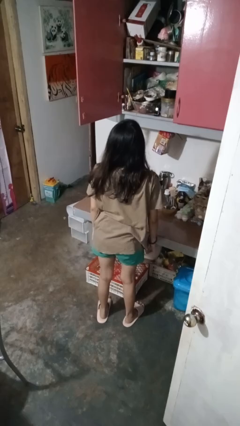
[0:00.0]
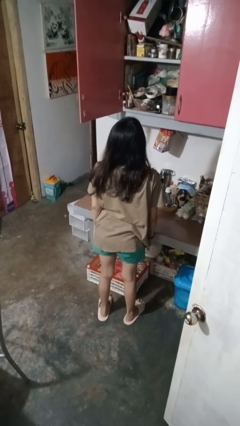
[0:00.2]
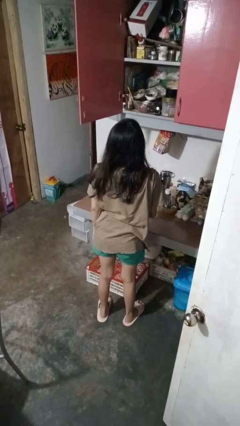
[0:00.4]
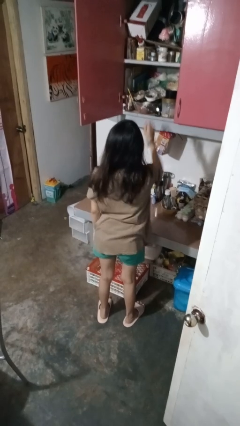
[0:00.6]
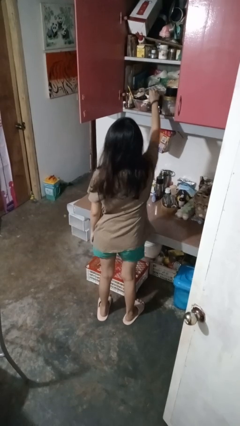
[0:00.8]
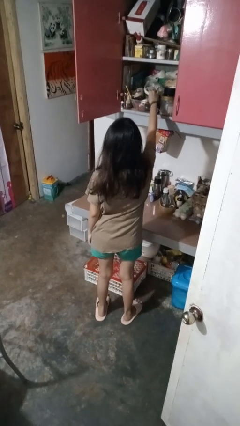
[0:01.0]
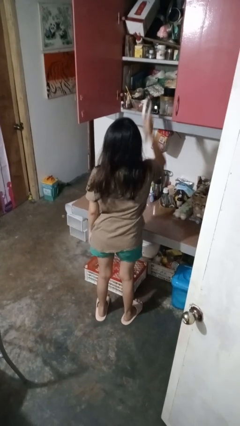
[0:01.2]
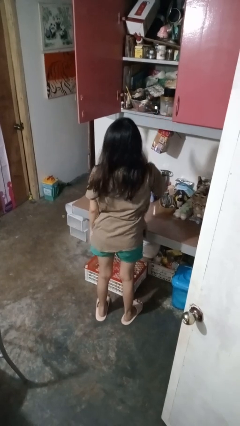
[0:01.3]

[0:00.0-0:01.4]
person takes object from cabinet

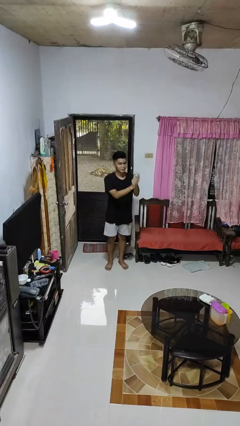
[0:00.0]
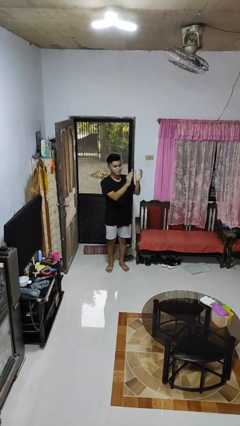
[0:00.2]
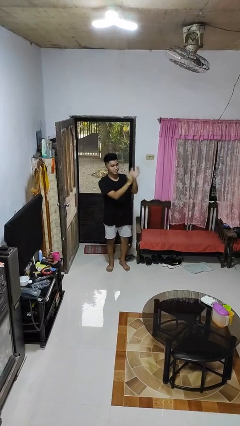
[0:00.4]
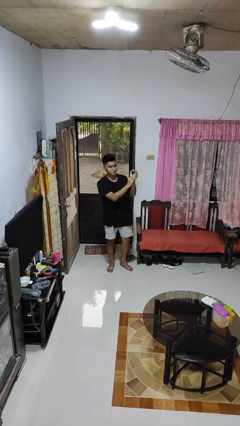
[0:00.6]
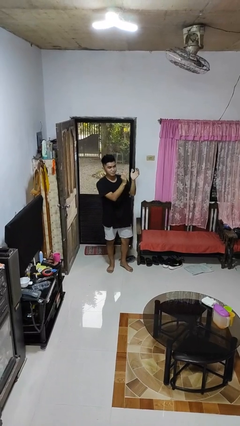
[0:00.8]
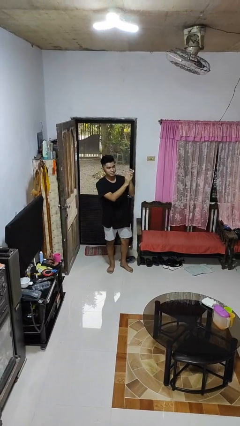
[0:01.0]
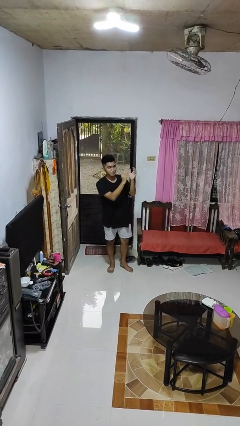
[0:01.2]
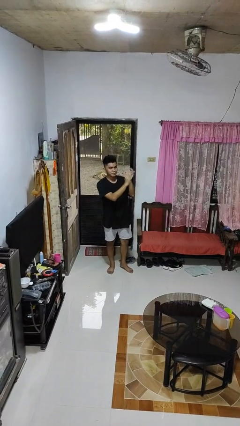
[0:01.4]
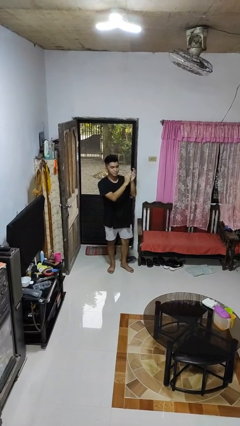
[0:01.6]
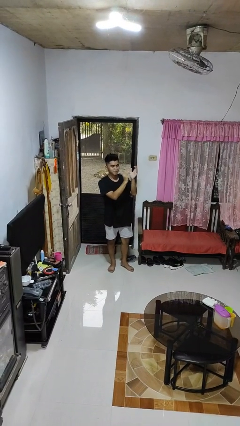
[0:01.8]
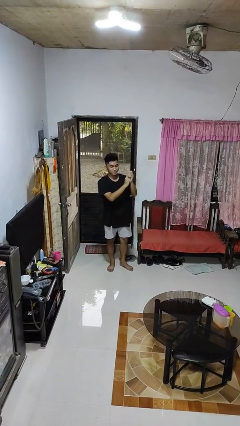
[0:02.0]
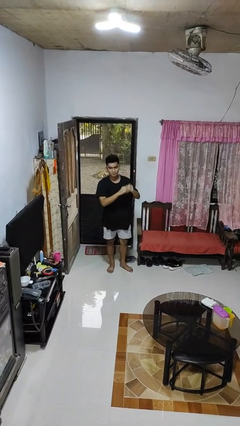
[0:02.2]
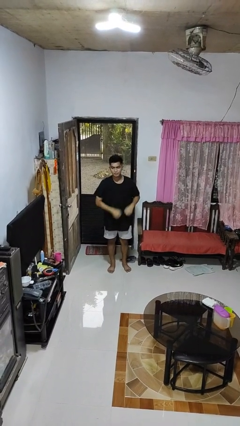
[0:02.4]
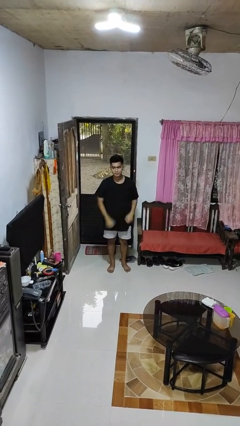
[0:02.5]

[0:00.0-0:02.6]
person claps hands

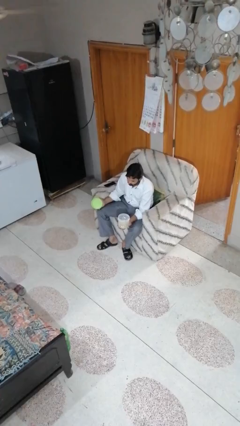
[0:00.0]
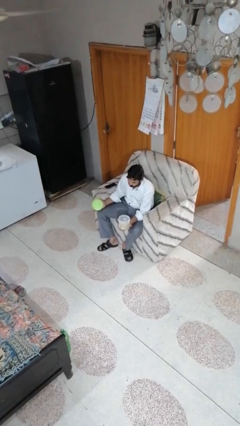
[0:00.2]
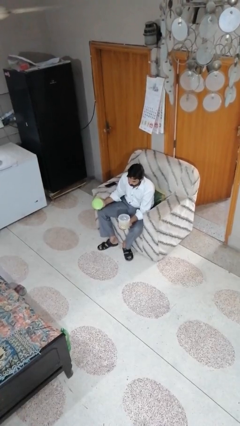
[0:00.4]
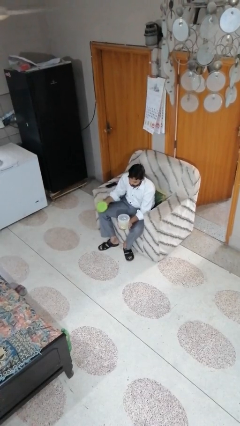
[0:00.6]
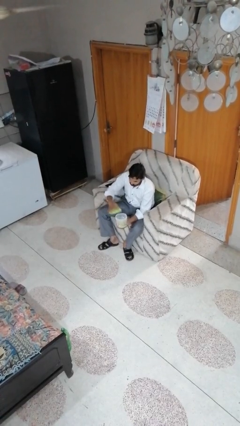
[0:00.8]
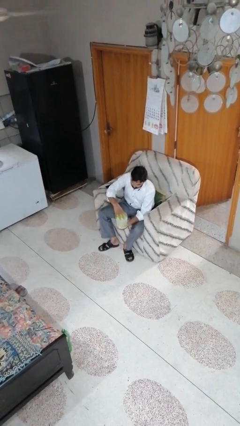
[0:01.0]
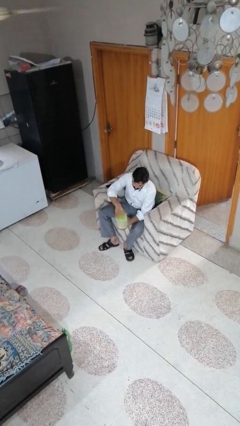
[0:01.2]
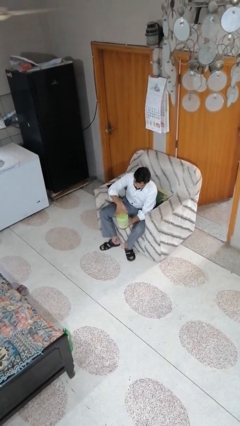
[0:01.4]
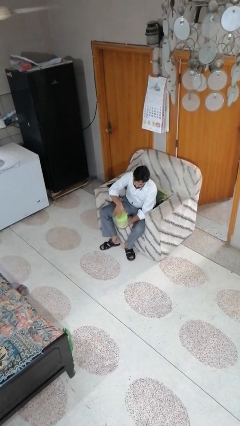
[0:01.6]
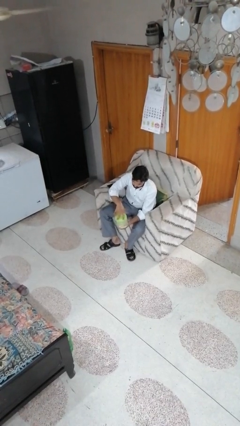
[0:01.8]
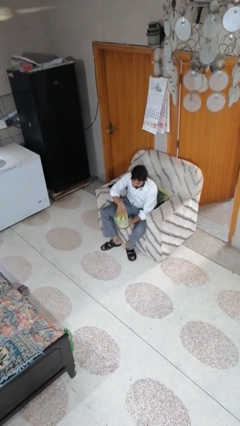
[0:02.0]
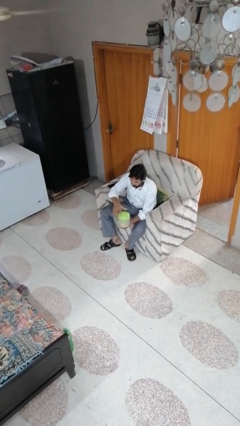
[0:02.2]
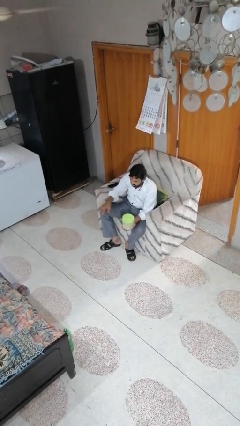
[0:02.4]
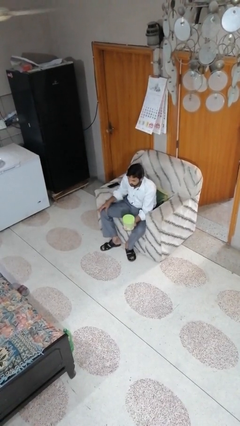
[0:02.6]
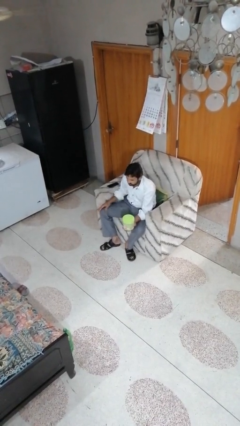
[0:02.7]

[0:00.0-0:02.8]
person closes jar

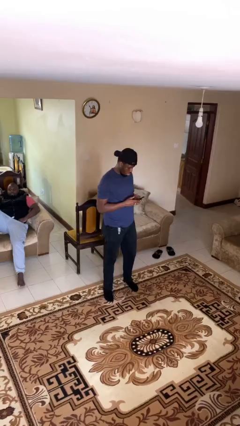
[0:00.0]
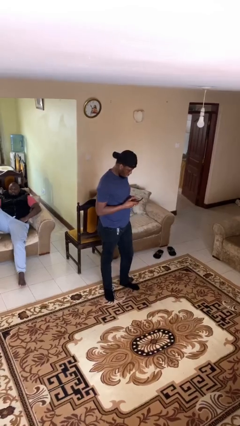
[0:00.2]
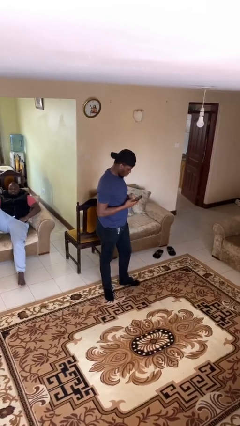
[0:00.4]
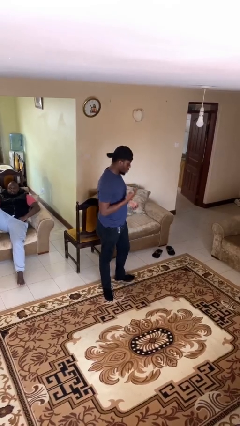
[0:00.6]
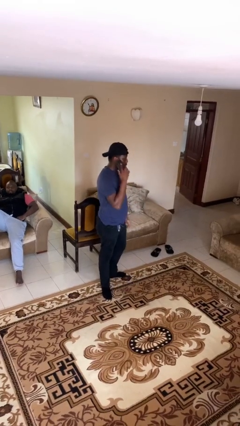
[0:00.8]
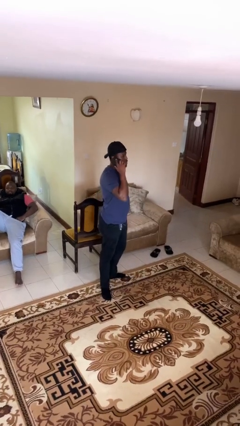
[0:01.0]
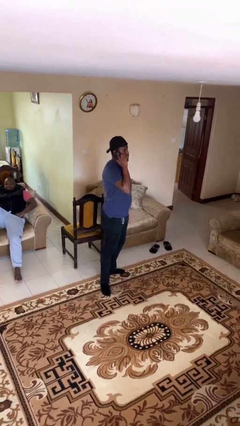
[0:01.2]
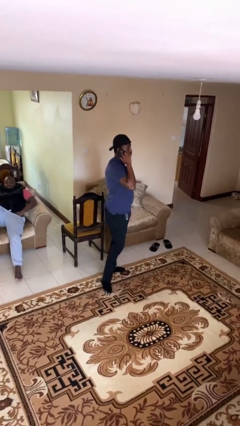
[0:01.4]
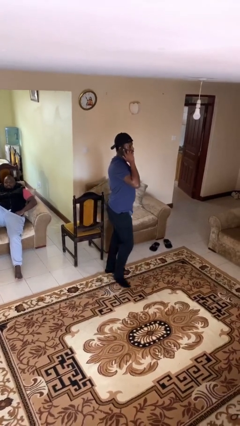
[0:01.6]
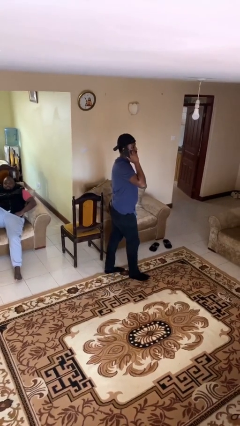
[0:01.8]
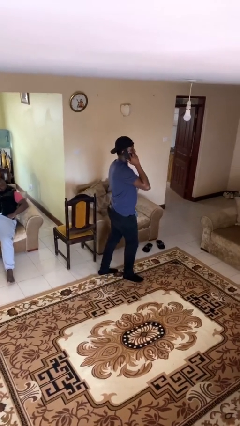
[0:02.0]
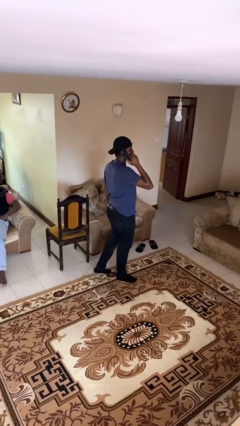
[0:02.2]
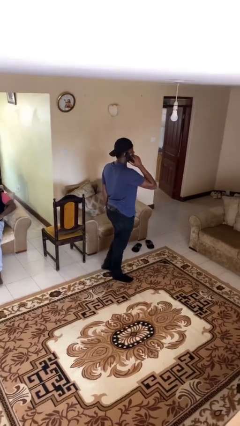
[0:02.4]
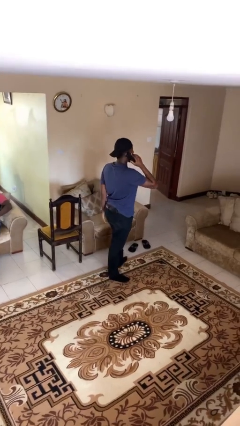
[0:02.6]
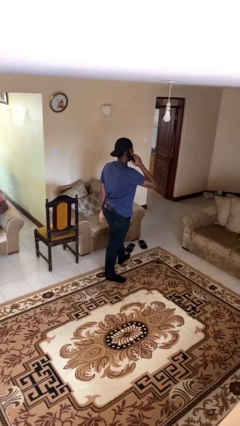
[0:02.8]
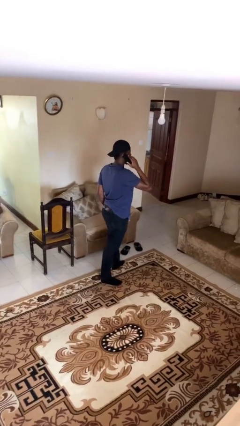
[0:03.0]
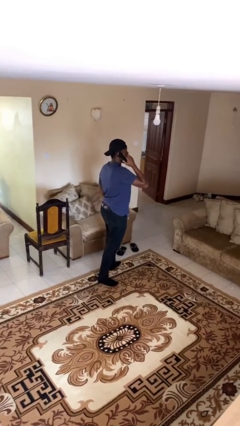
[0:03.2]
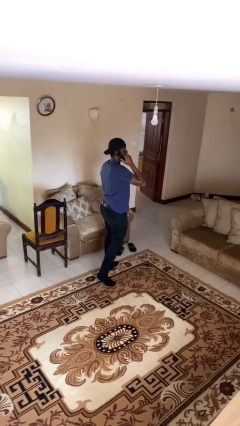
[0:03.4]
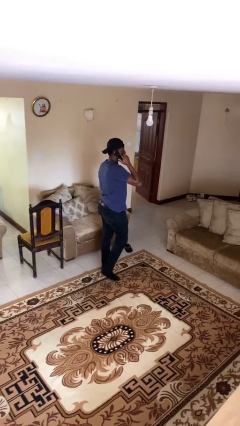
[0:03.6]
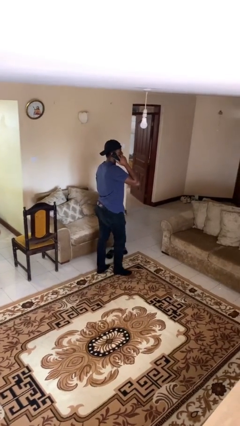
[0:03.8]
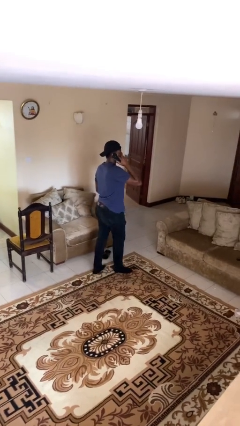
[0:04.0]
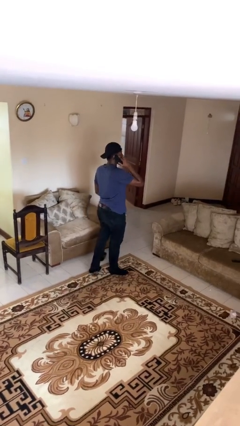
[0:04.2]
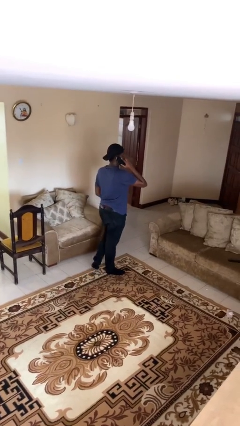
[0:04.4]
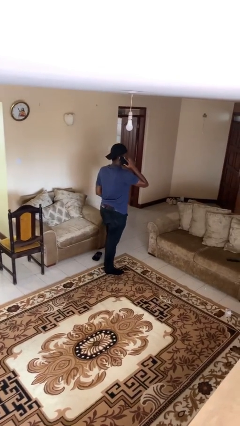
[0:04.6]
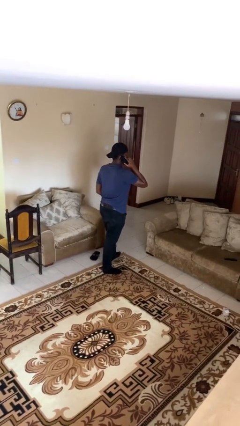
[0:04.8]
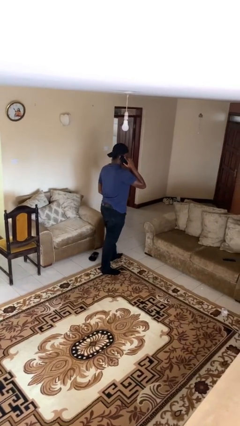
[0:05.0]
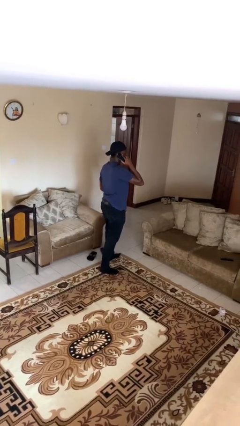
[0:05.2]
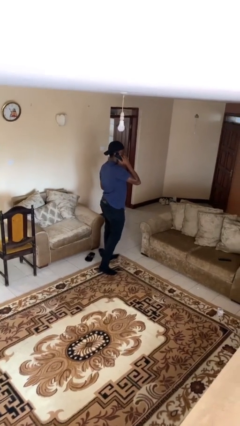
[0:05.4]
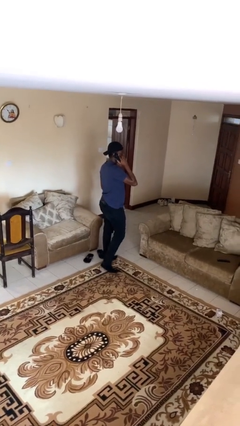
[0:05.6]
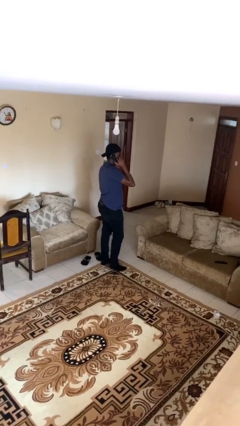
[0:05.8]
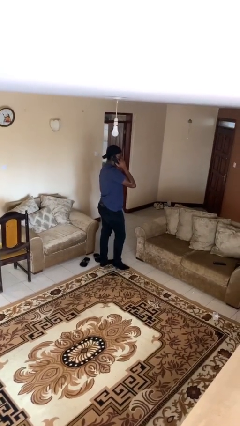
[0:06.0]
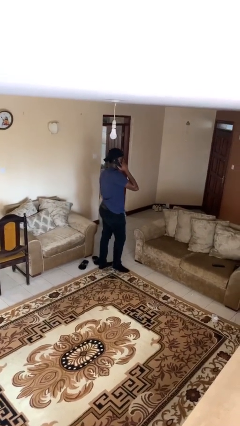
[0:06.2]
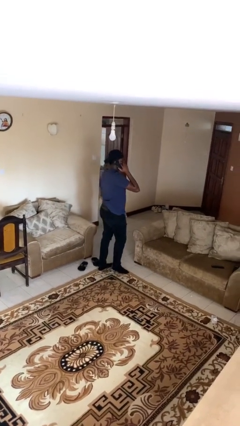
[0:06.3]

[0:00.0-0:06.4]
person talks on phone

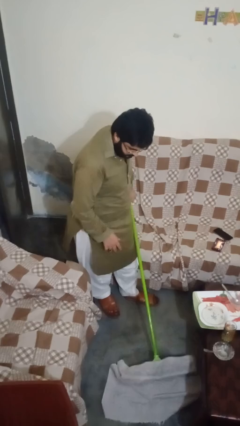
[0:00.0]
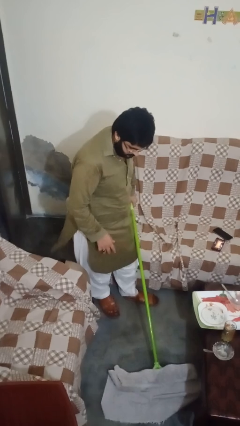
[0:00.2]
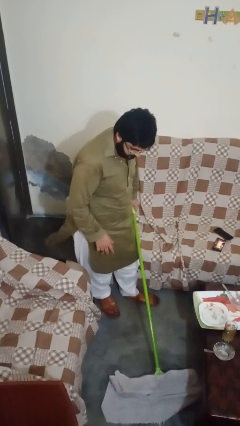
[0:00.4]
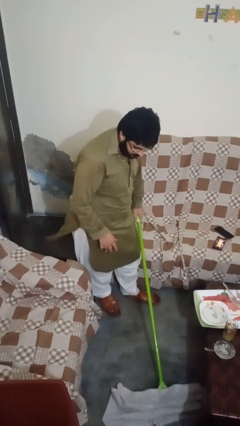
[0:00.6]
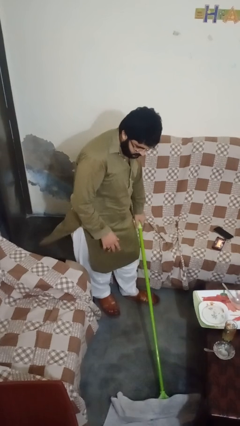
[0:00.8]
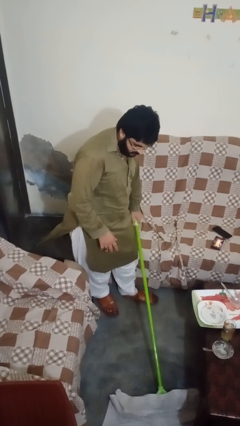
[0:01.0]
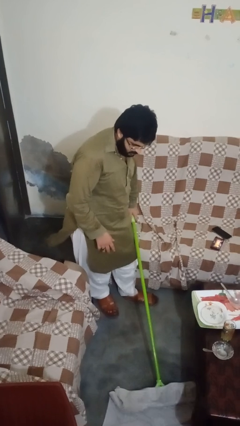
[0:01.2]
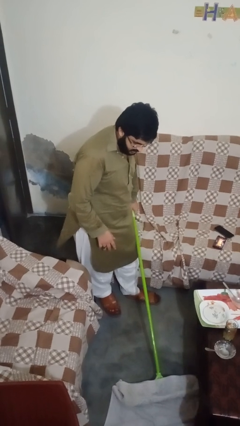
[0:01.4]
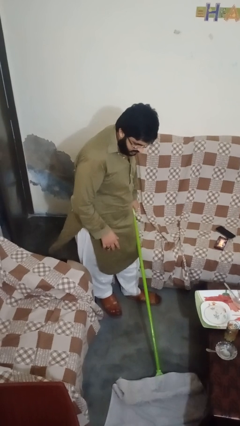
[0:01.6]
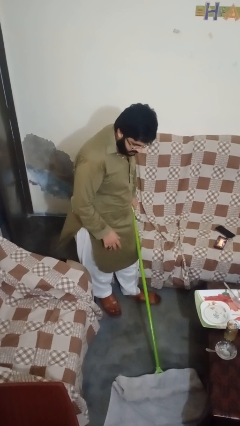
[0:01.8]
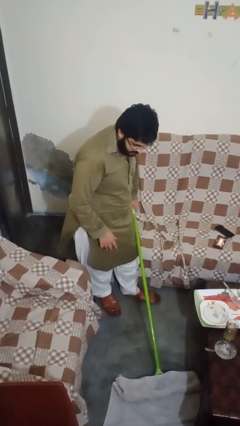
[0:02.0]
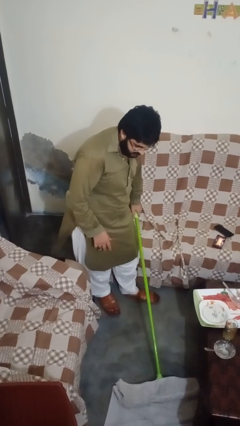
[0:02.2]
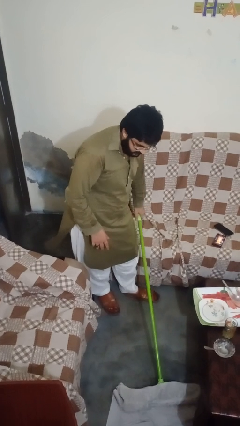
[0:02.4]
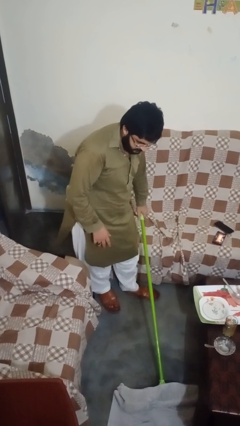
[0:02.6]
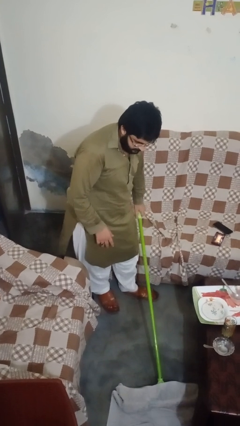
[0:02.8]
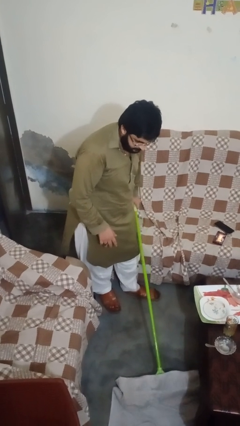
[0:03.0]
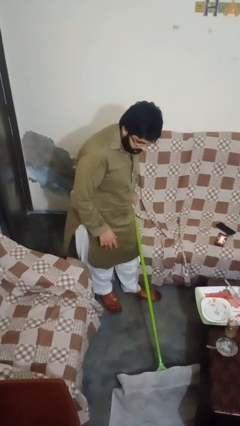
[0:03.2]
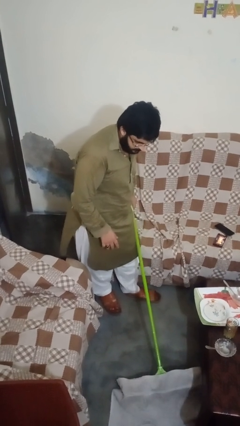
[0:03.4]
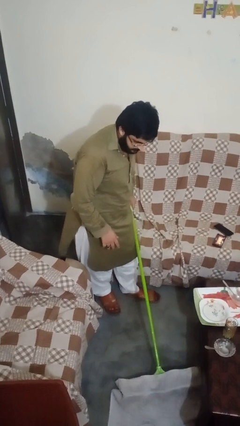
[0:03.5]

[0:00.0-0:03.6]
person mops

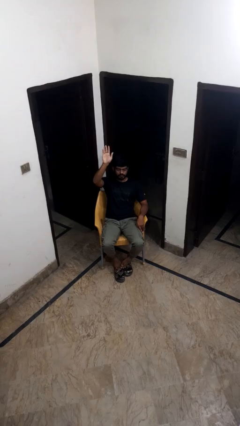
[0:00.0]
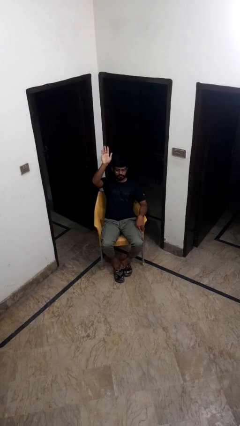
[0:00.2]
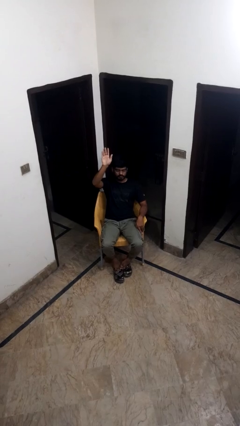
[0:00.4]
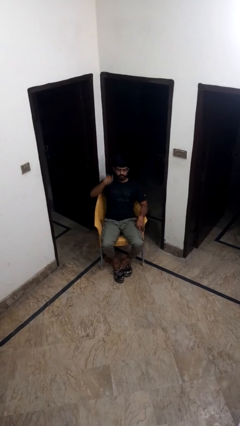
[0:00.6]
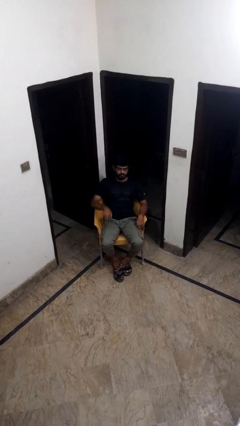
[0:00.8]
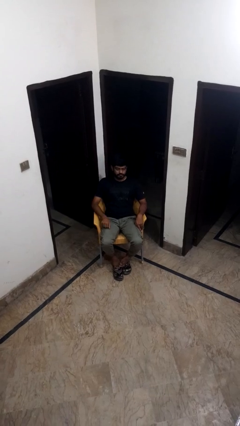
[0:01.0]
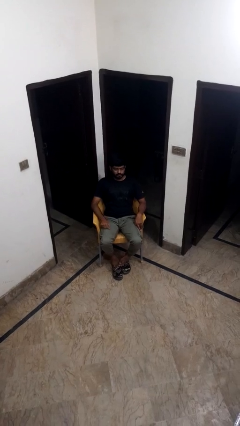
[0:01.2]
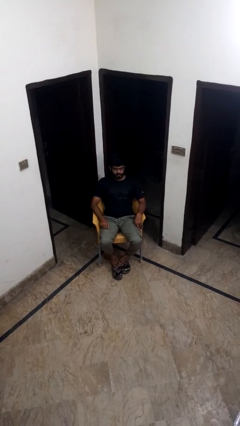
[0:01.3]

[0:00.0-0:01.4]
person gestures lower hand
